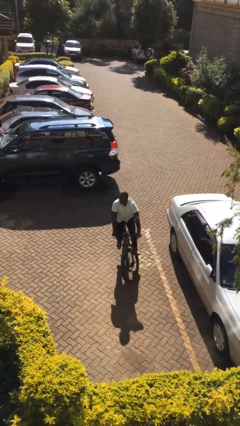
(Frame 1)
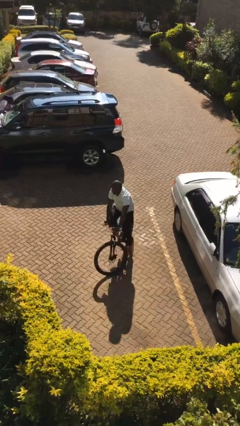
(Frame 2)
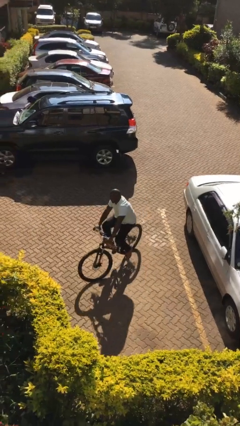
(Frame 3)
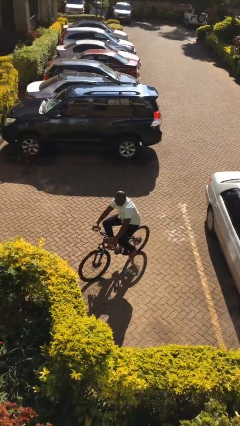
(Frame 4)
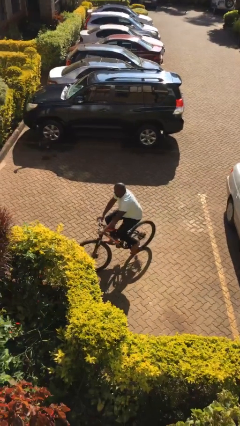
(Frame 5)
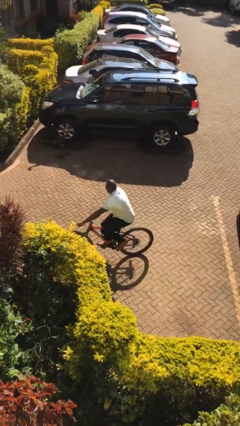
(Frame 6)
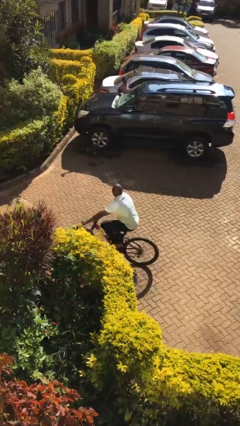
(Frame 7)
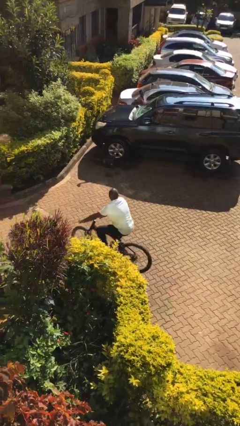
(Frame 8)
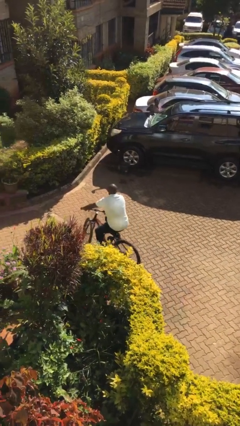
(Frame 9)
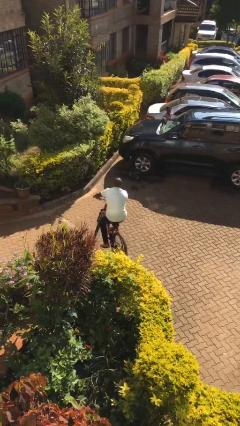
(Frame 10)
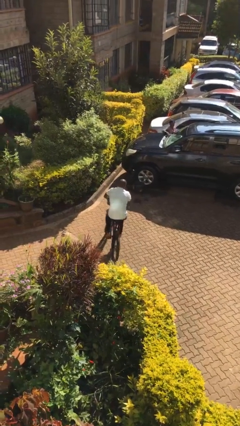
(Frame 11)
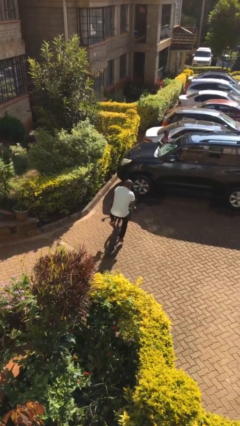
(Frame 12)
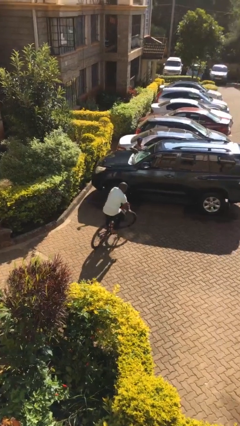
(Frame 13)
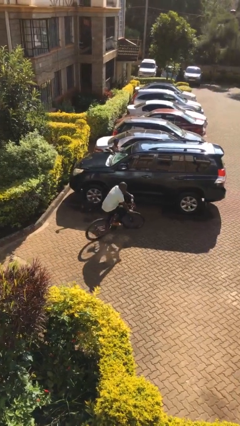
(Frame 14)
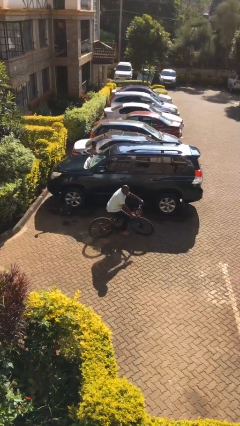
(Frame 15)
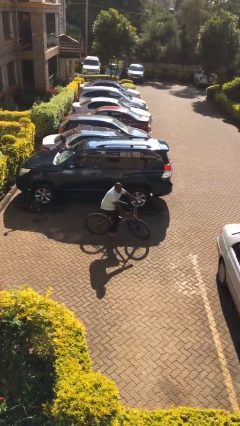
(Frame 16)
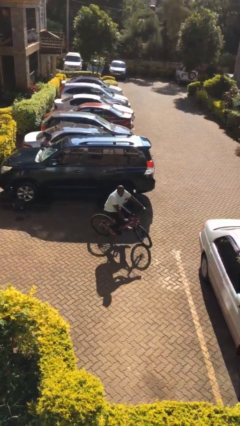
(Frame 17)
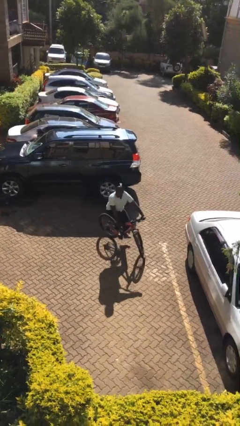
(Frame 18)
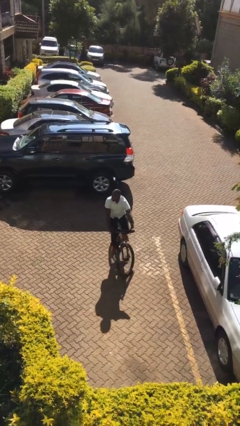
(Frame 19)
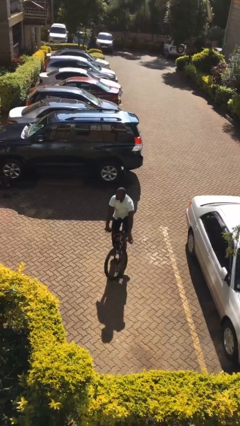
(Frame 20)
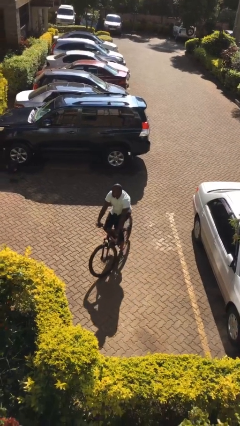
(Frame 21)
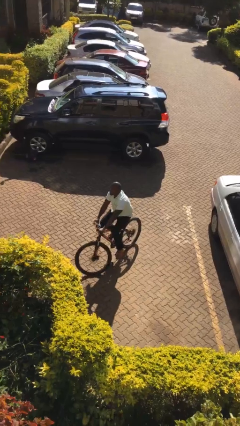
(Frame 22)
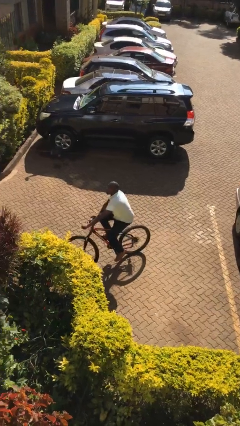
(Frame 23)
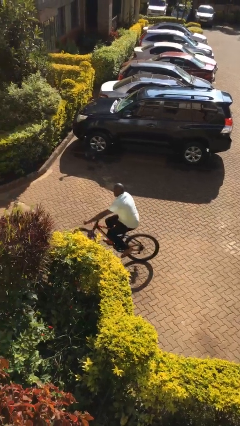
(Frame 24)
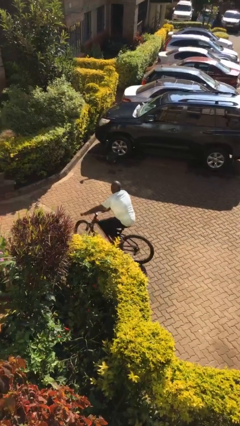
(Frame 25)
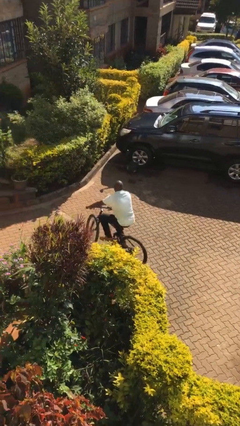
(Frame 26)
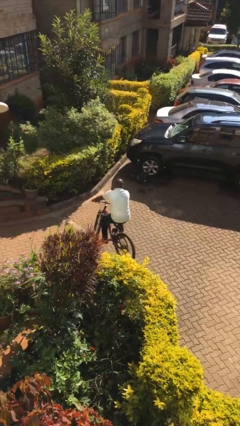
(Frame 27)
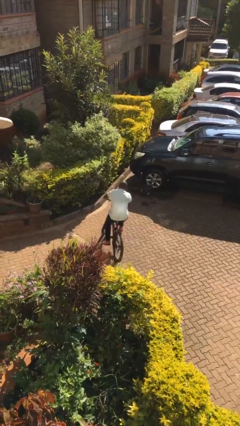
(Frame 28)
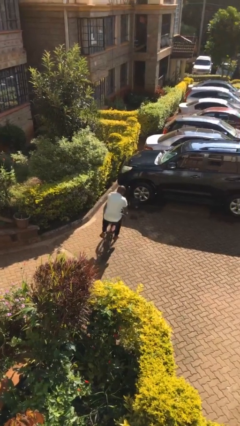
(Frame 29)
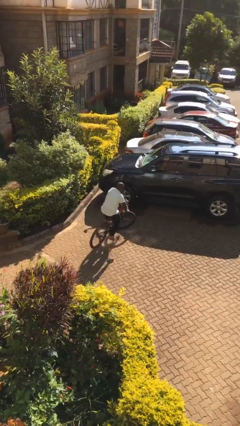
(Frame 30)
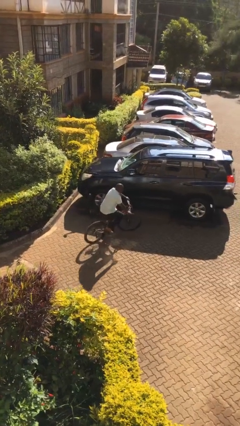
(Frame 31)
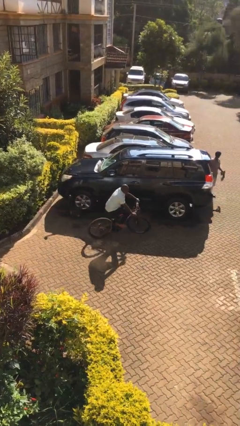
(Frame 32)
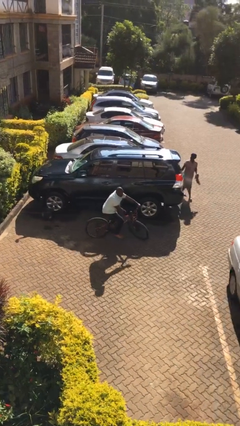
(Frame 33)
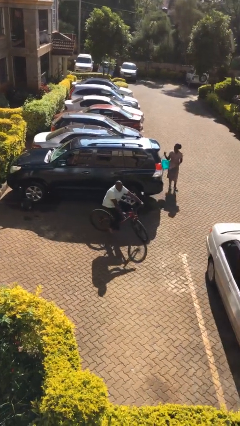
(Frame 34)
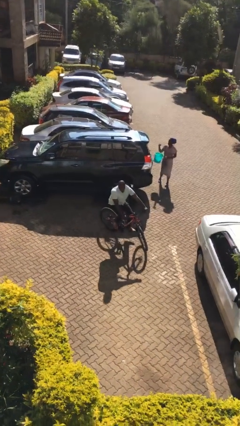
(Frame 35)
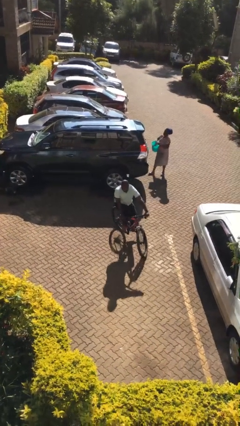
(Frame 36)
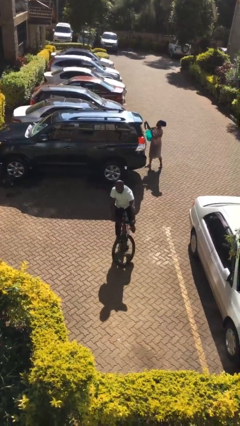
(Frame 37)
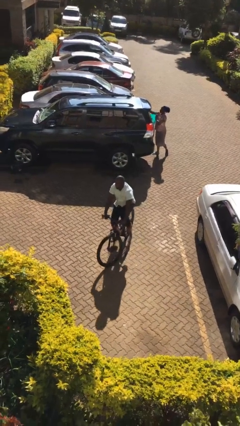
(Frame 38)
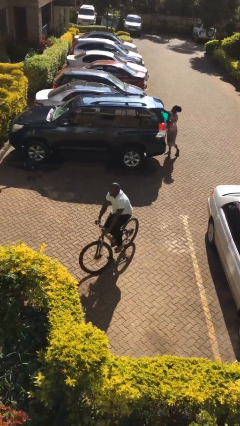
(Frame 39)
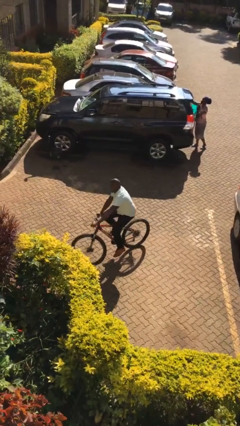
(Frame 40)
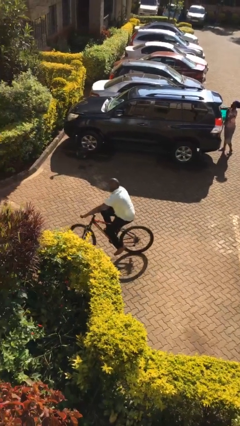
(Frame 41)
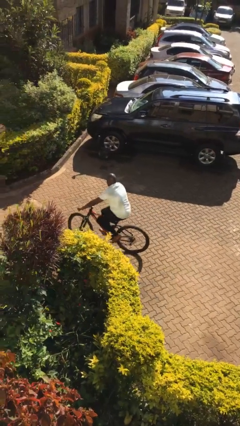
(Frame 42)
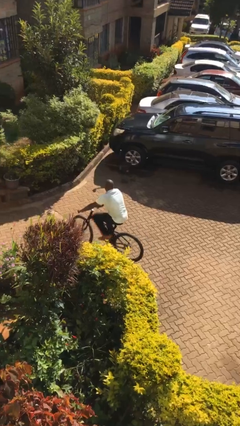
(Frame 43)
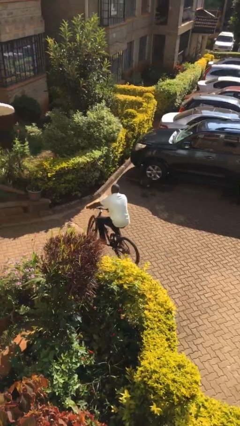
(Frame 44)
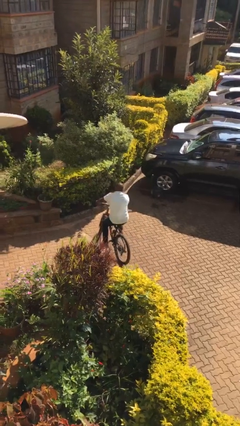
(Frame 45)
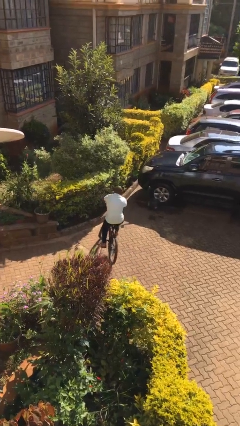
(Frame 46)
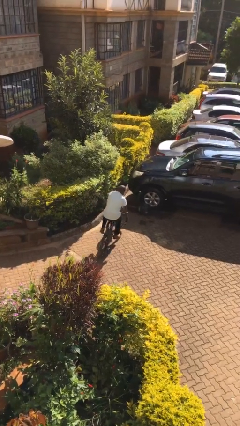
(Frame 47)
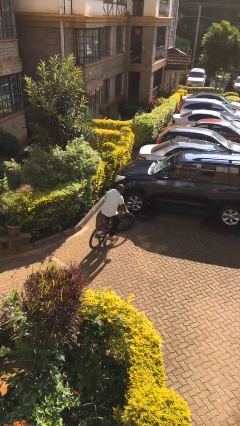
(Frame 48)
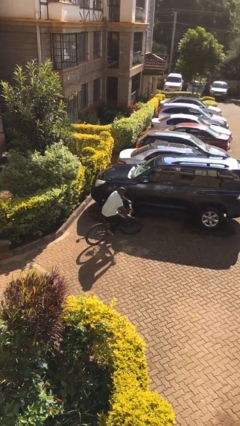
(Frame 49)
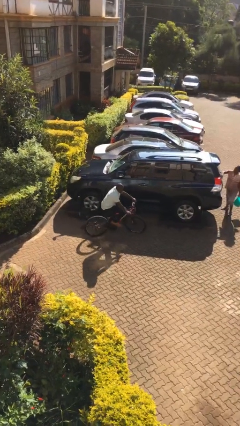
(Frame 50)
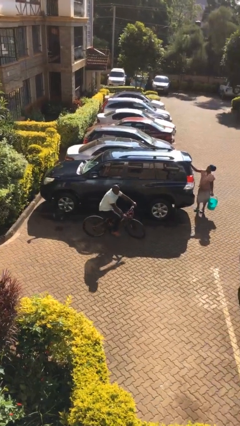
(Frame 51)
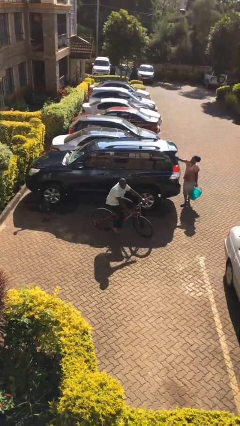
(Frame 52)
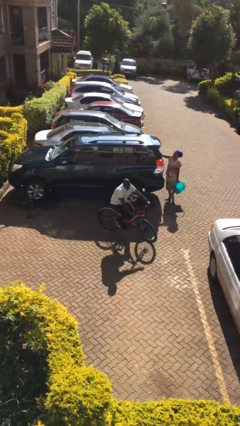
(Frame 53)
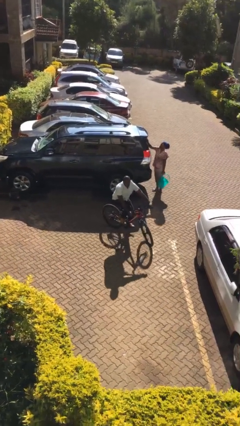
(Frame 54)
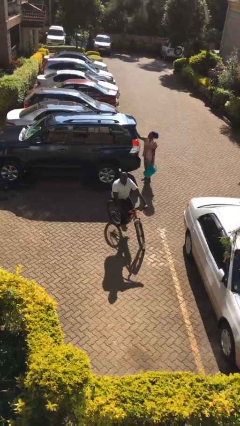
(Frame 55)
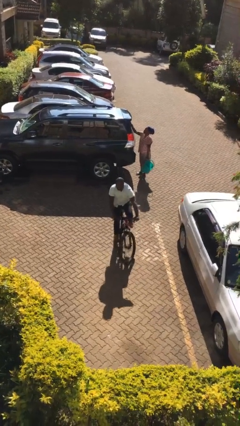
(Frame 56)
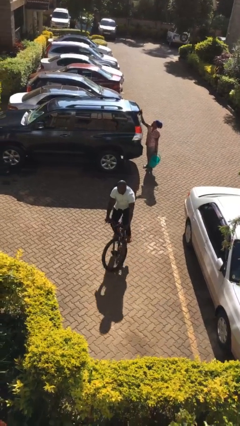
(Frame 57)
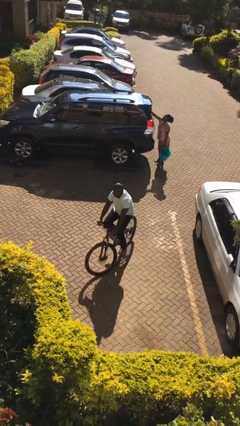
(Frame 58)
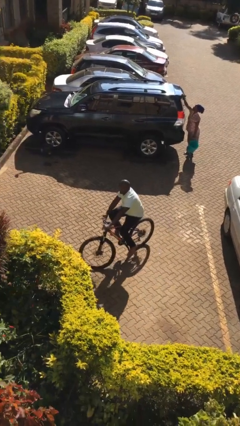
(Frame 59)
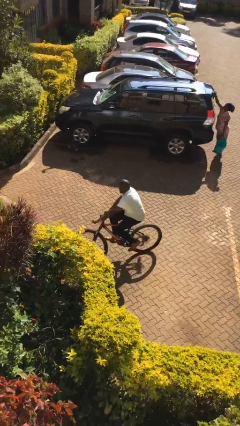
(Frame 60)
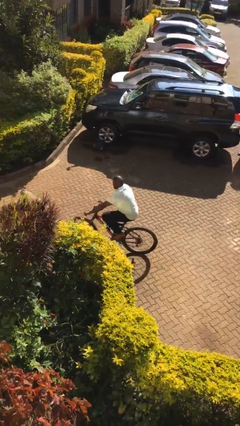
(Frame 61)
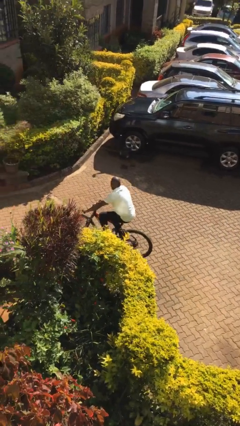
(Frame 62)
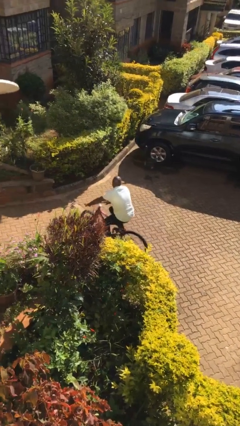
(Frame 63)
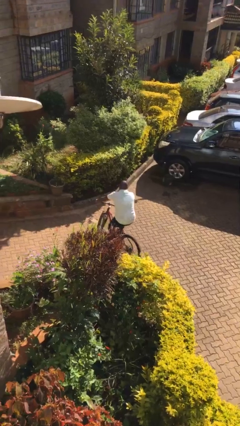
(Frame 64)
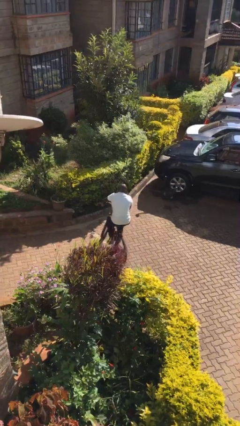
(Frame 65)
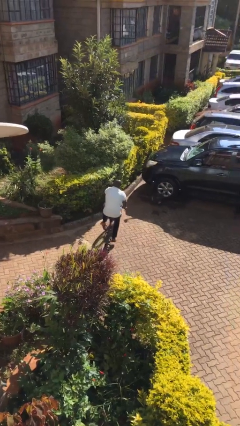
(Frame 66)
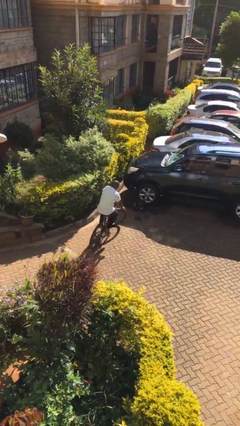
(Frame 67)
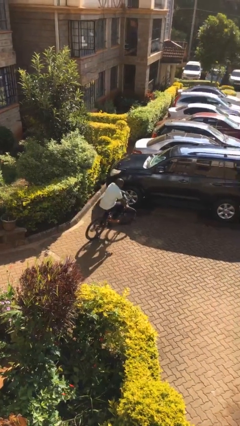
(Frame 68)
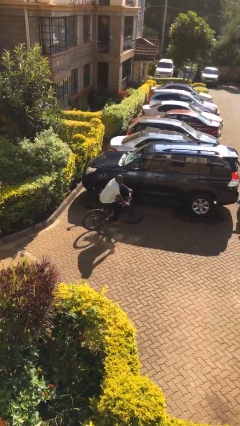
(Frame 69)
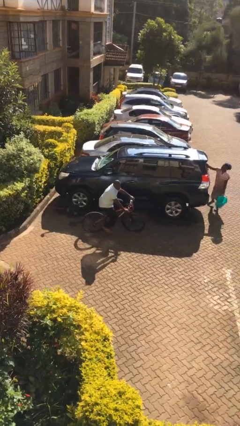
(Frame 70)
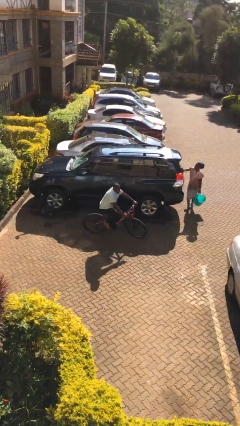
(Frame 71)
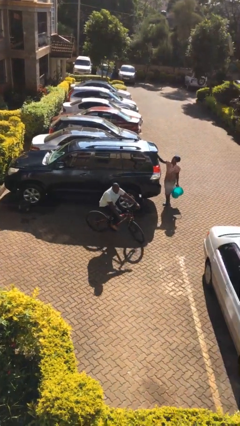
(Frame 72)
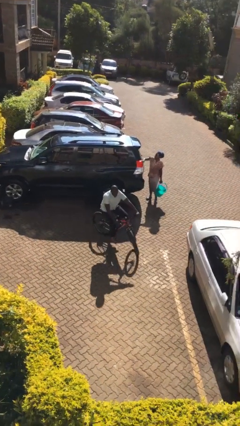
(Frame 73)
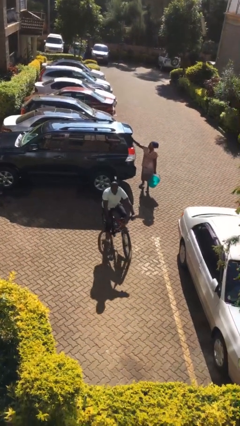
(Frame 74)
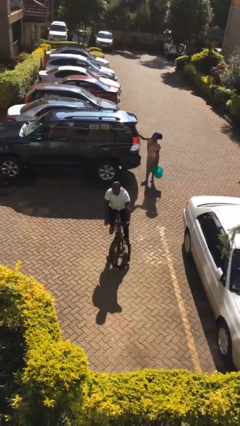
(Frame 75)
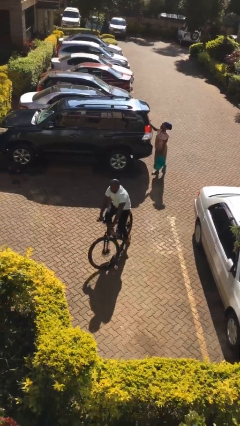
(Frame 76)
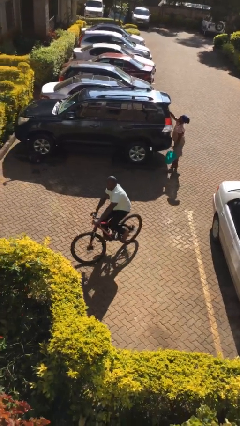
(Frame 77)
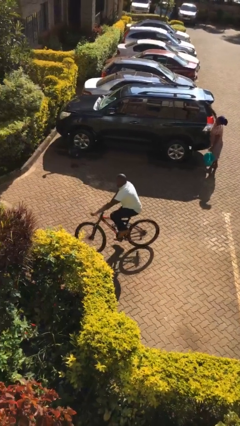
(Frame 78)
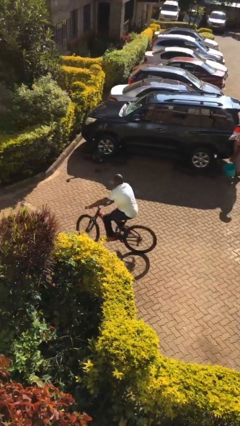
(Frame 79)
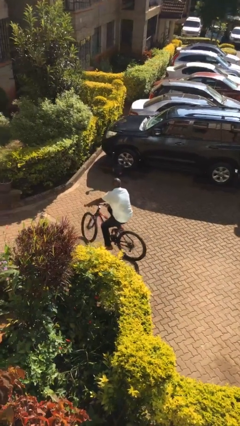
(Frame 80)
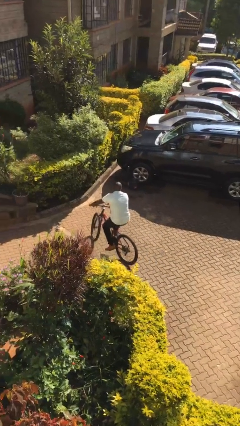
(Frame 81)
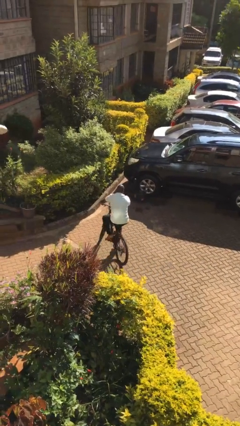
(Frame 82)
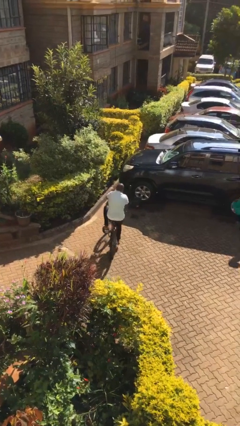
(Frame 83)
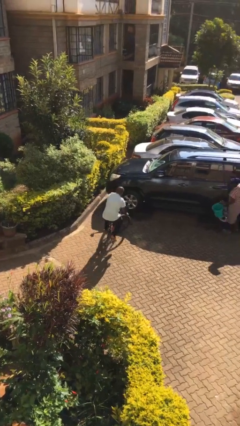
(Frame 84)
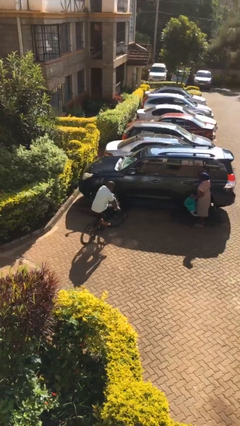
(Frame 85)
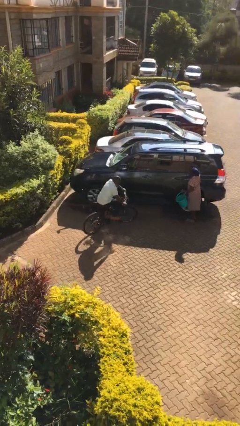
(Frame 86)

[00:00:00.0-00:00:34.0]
person rides bicycle

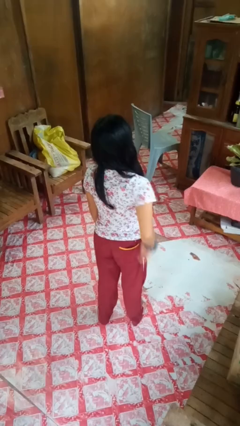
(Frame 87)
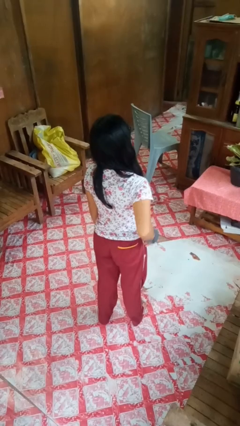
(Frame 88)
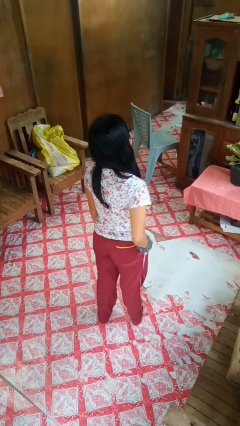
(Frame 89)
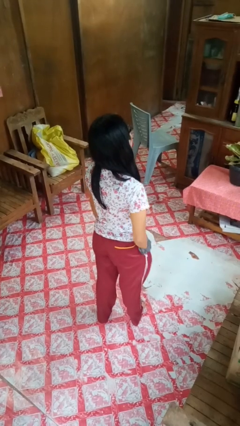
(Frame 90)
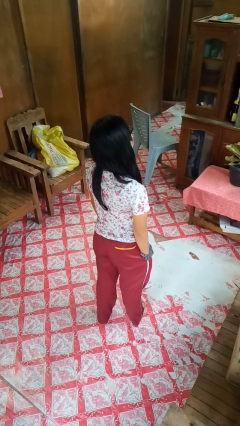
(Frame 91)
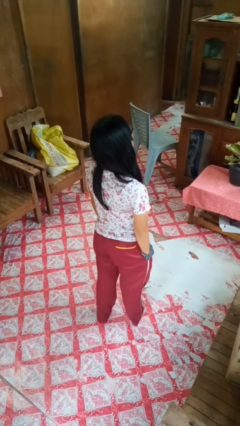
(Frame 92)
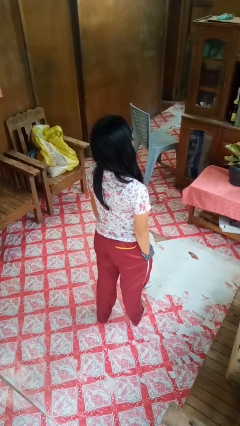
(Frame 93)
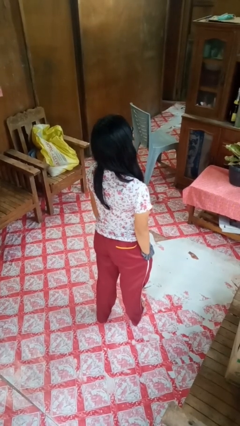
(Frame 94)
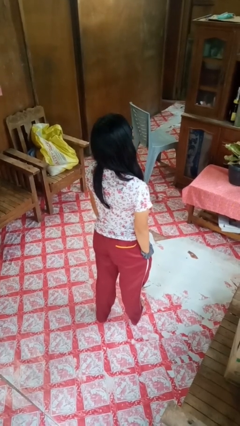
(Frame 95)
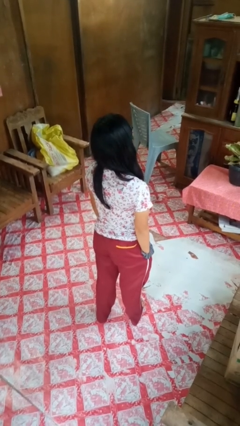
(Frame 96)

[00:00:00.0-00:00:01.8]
person puts hands in back pockets
